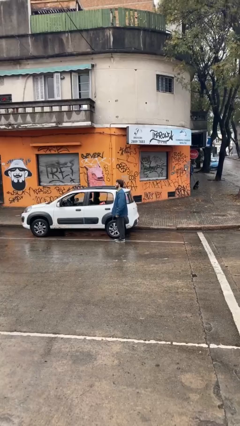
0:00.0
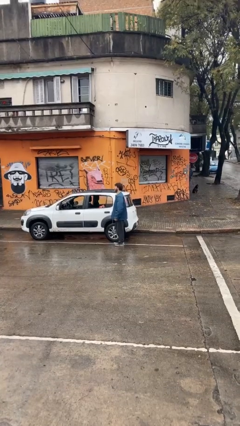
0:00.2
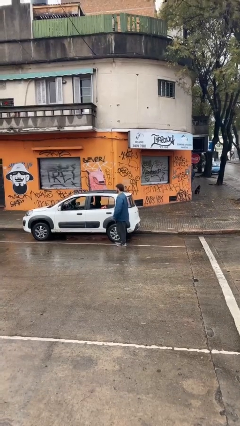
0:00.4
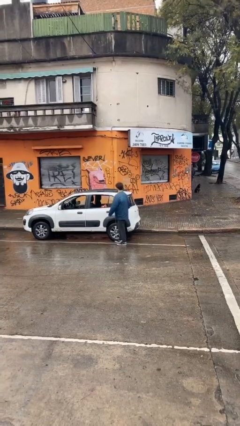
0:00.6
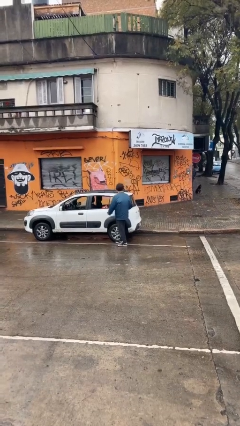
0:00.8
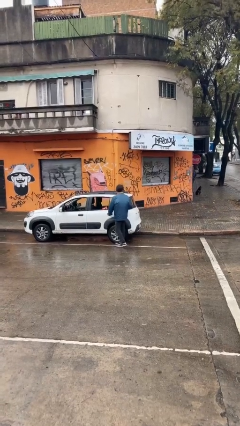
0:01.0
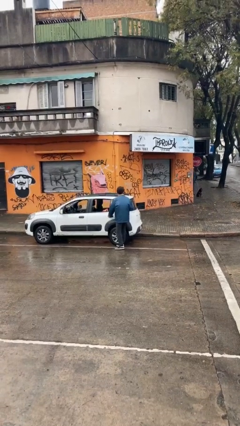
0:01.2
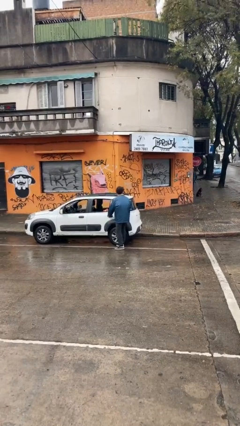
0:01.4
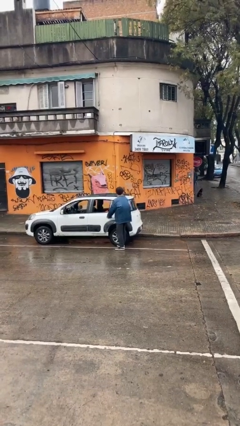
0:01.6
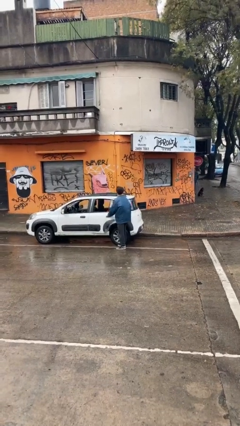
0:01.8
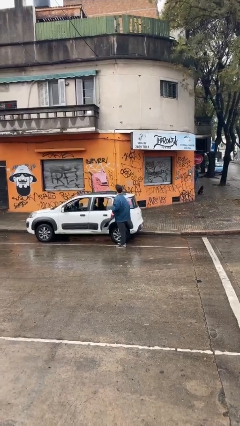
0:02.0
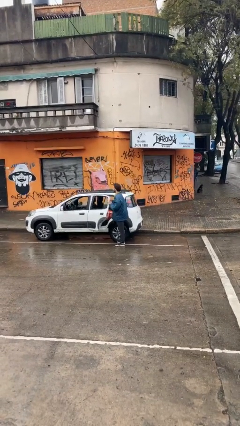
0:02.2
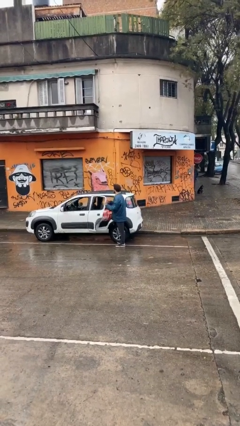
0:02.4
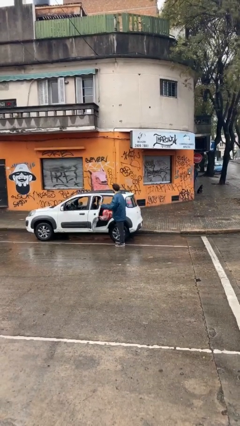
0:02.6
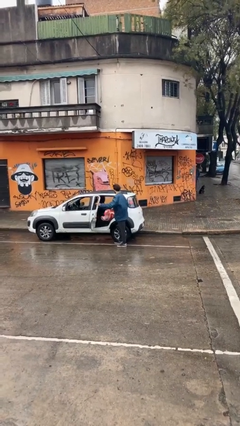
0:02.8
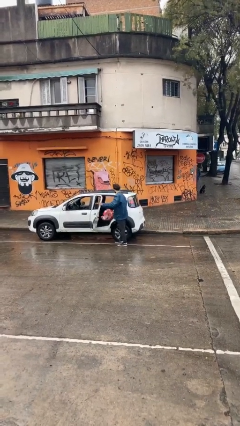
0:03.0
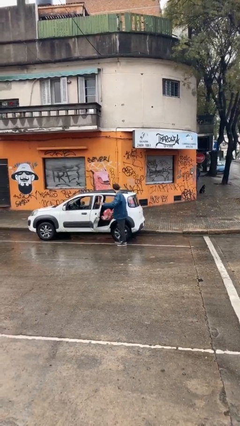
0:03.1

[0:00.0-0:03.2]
person opens car door

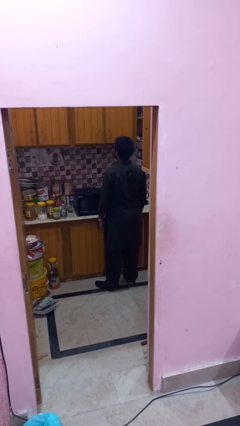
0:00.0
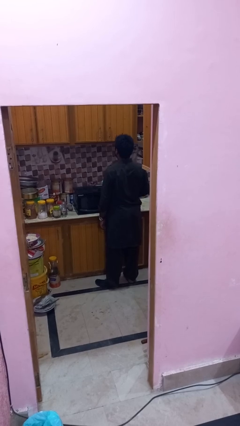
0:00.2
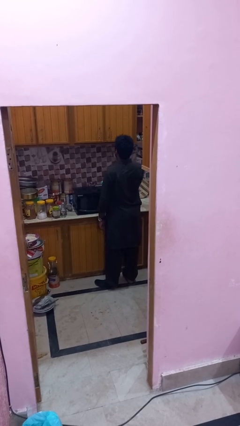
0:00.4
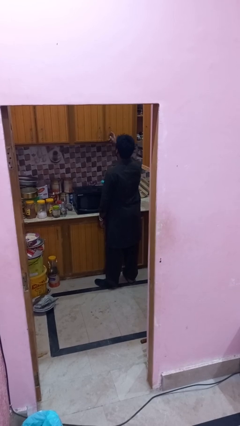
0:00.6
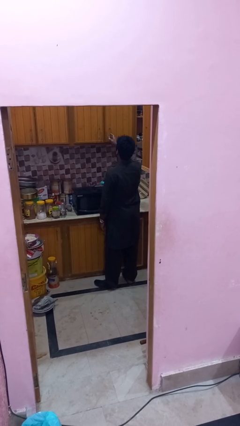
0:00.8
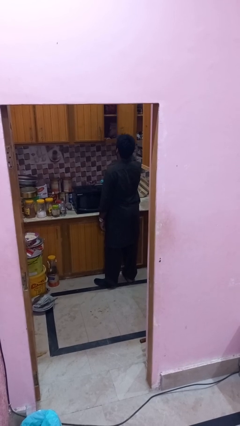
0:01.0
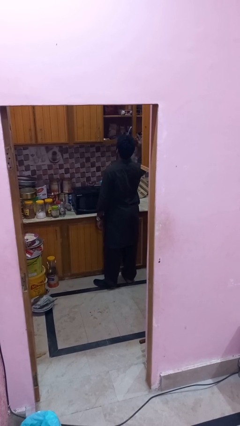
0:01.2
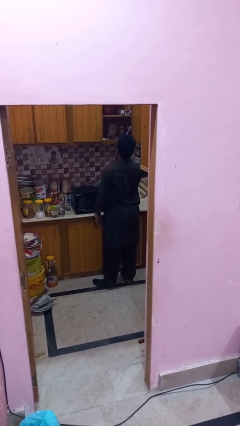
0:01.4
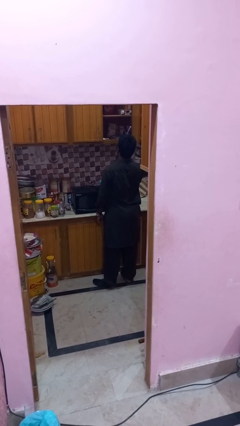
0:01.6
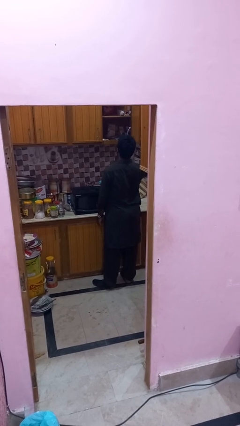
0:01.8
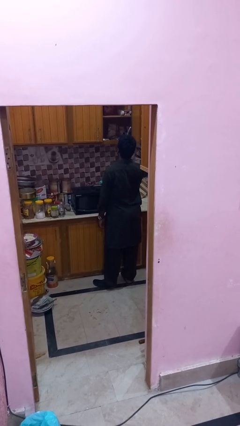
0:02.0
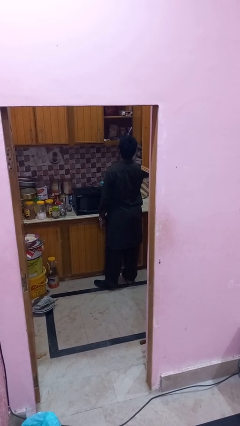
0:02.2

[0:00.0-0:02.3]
person opens cabinet

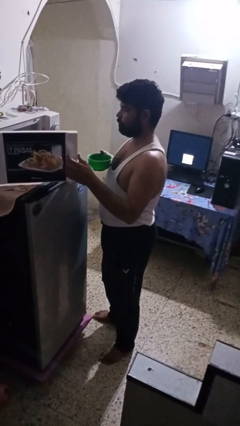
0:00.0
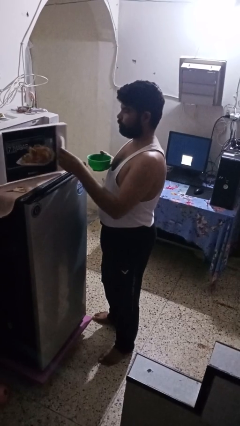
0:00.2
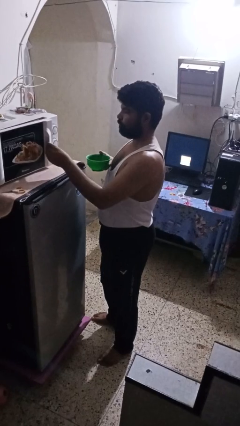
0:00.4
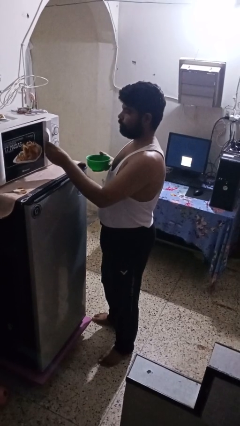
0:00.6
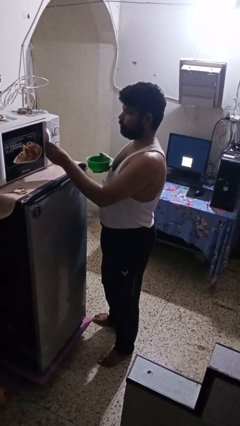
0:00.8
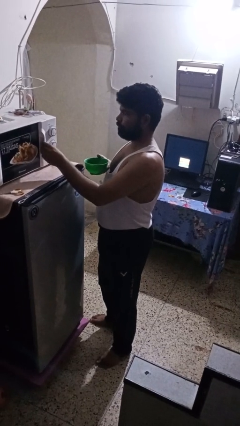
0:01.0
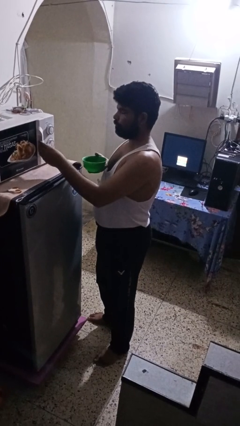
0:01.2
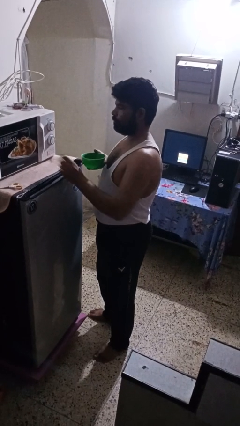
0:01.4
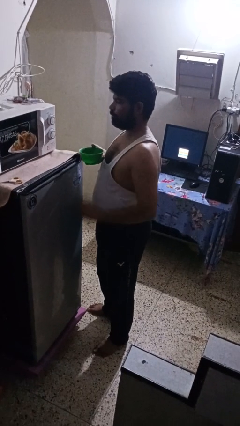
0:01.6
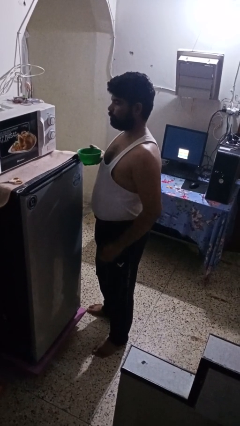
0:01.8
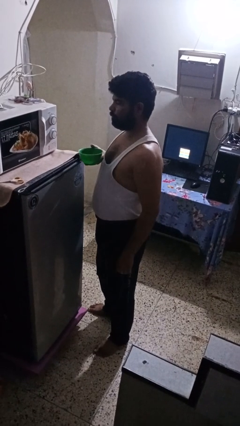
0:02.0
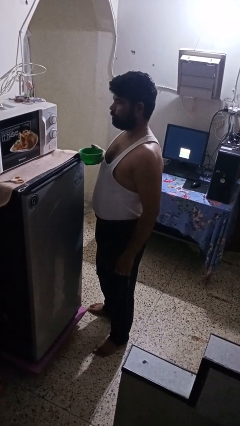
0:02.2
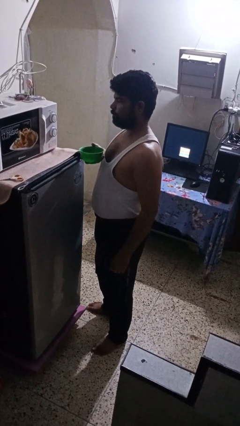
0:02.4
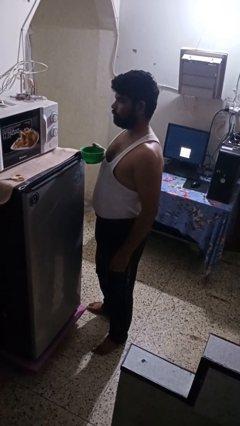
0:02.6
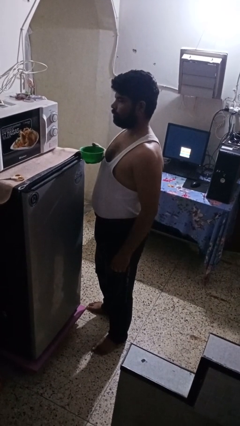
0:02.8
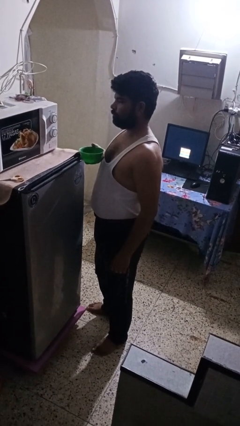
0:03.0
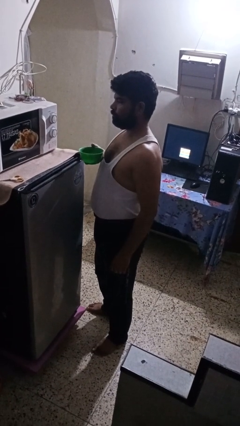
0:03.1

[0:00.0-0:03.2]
person closes microwave

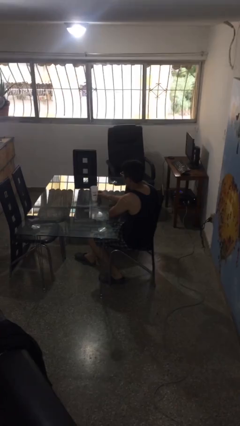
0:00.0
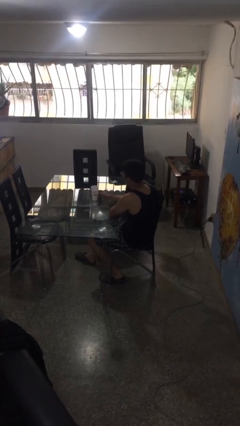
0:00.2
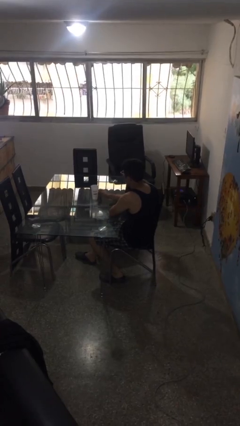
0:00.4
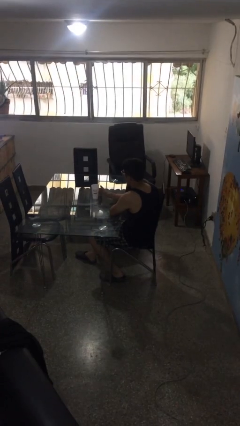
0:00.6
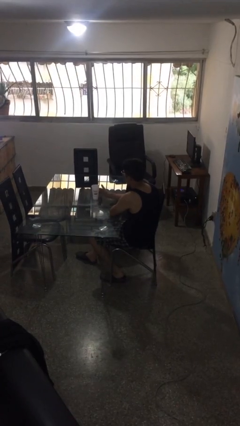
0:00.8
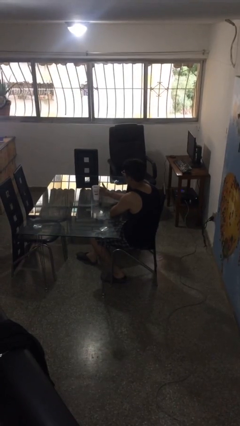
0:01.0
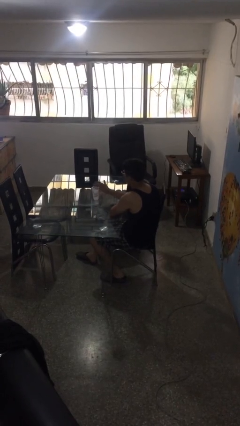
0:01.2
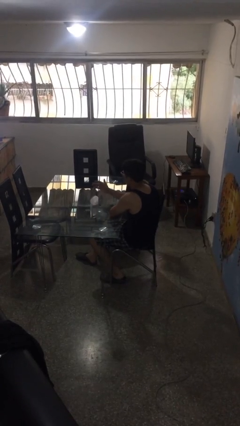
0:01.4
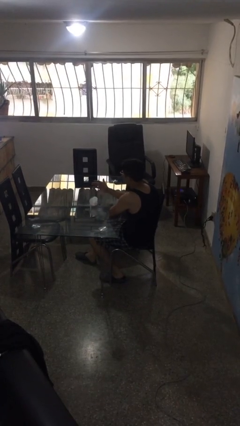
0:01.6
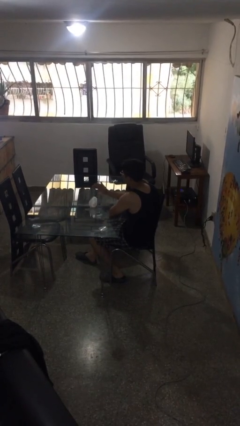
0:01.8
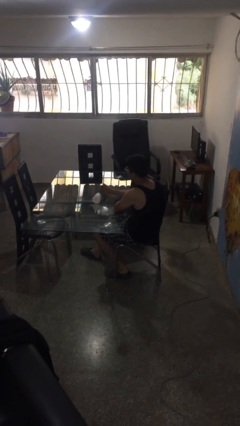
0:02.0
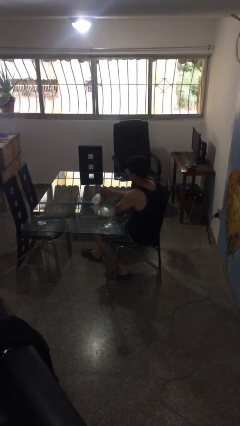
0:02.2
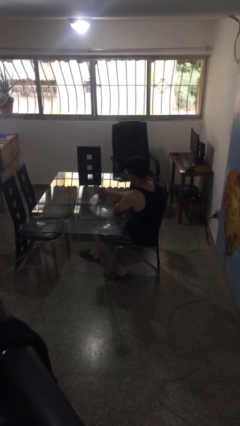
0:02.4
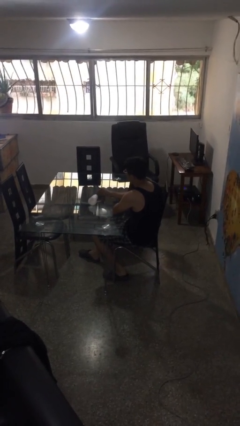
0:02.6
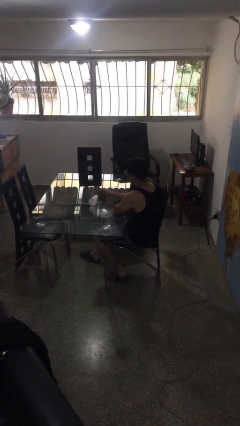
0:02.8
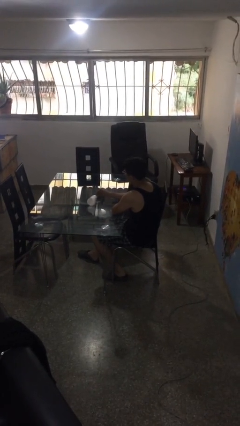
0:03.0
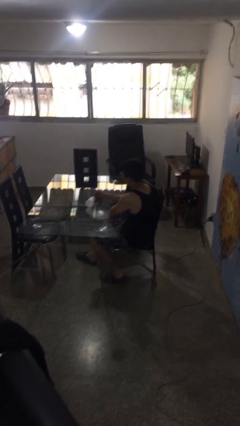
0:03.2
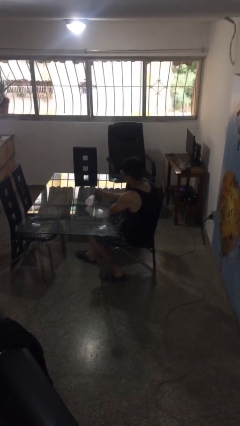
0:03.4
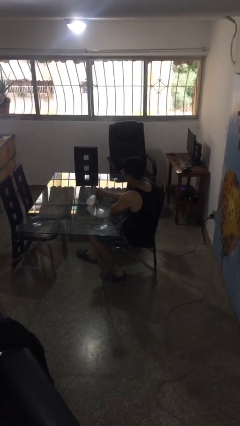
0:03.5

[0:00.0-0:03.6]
person knocks over glass

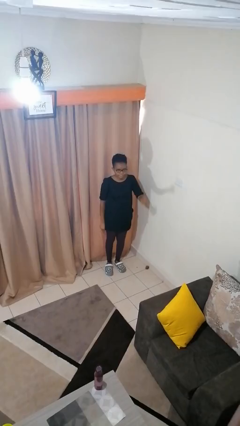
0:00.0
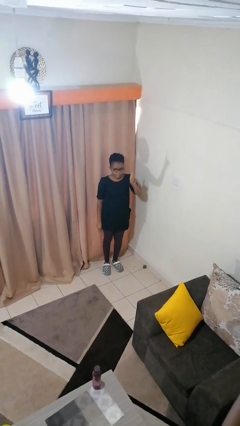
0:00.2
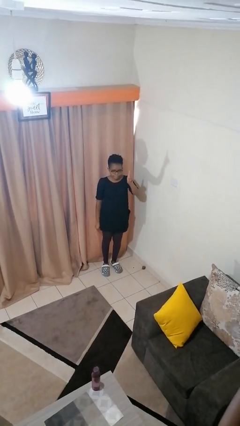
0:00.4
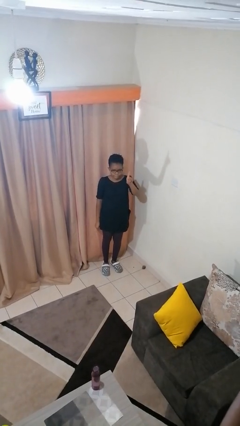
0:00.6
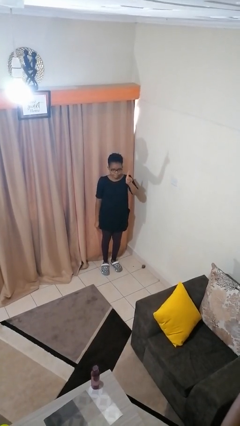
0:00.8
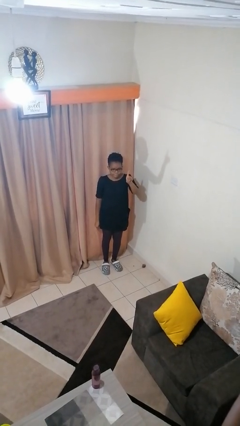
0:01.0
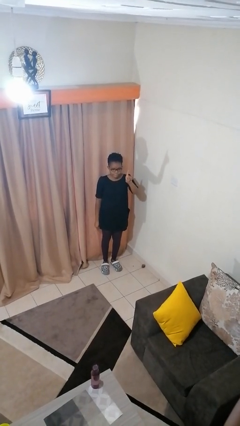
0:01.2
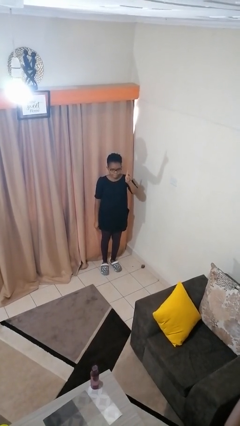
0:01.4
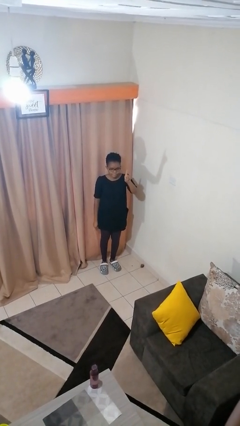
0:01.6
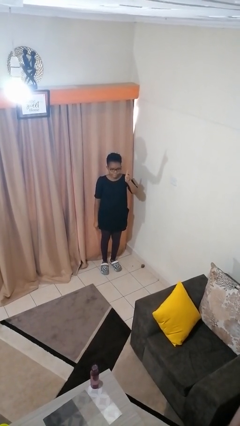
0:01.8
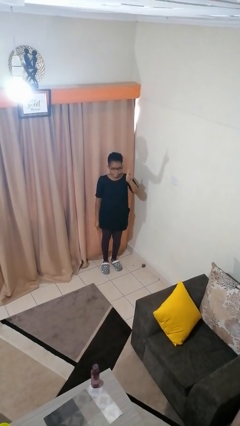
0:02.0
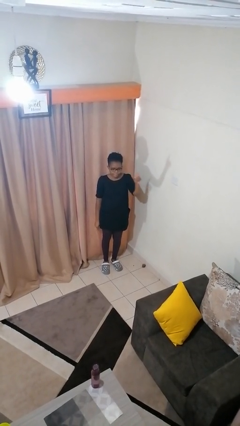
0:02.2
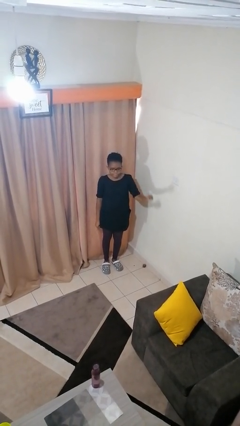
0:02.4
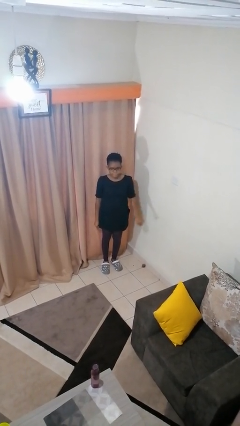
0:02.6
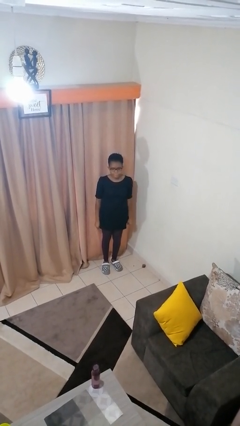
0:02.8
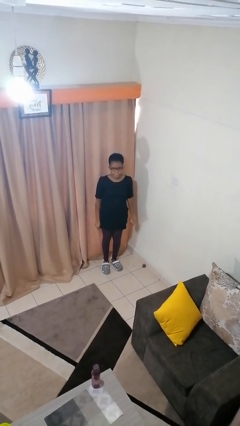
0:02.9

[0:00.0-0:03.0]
person gestures number one

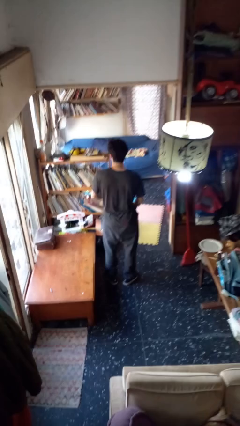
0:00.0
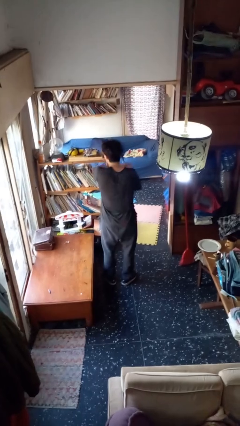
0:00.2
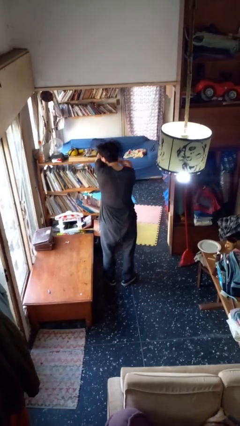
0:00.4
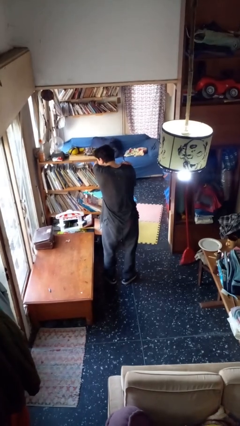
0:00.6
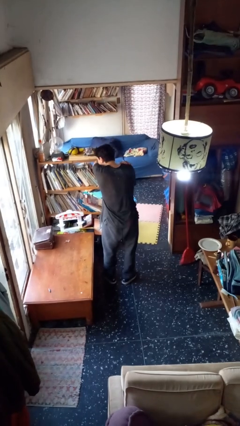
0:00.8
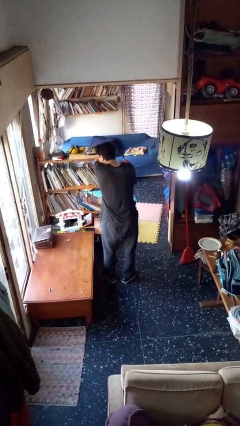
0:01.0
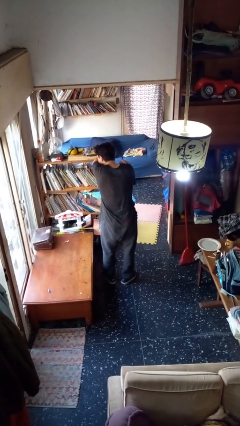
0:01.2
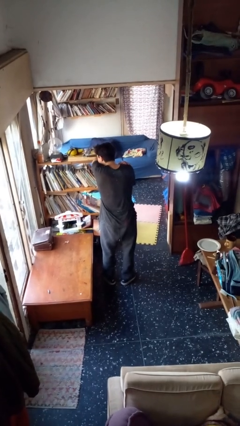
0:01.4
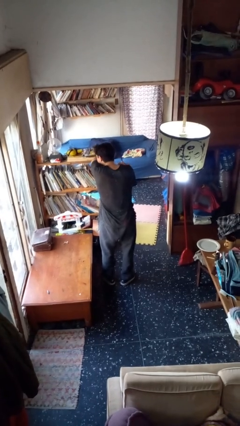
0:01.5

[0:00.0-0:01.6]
person sneezes into arm

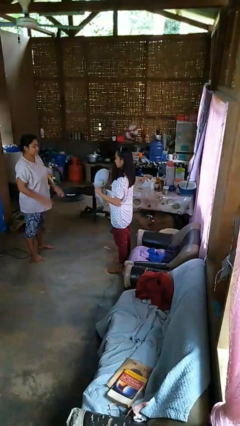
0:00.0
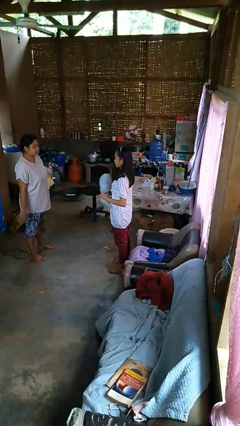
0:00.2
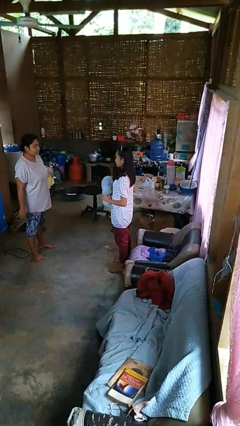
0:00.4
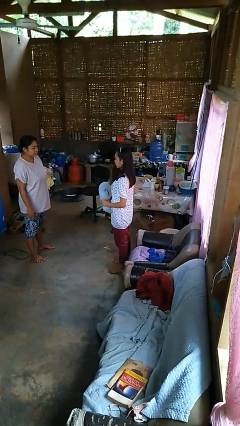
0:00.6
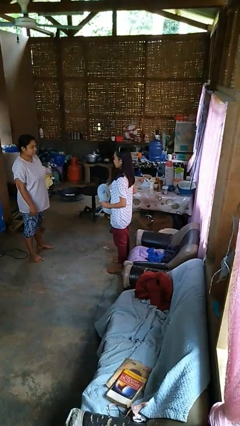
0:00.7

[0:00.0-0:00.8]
person catches object from person
